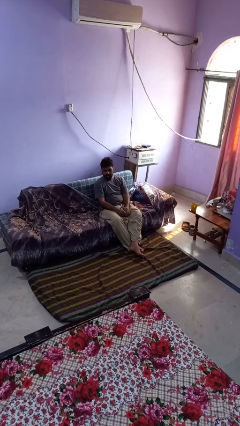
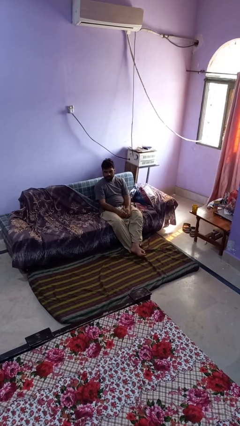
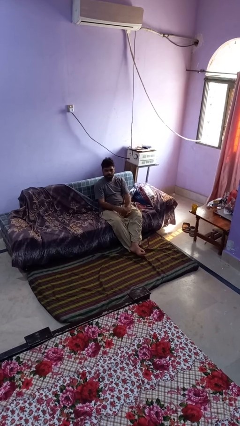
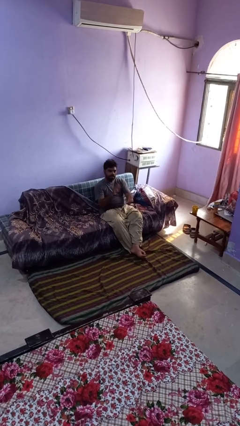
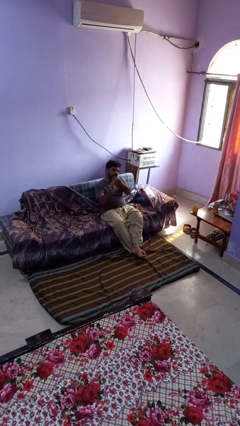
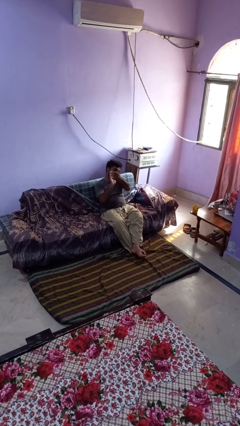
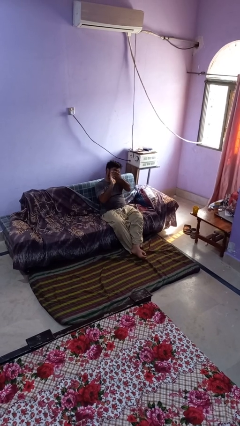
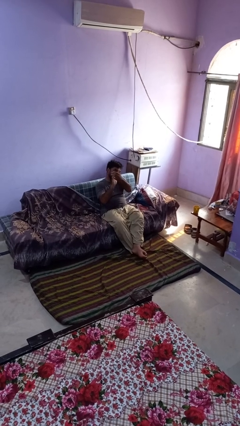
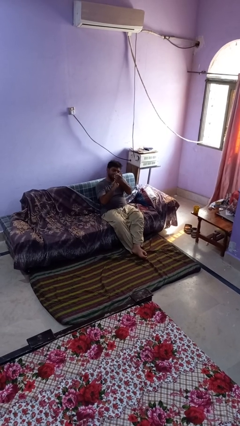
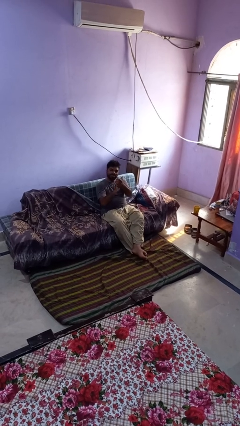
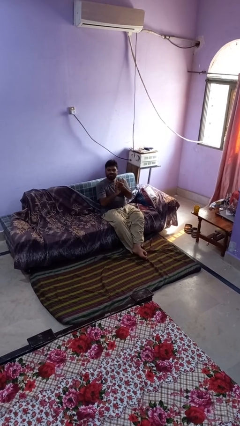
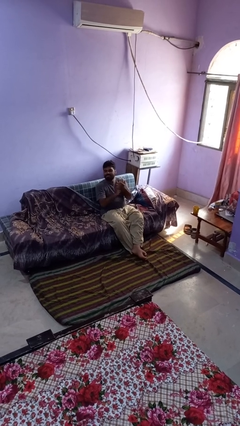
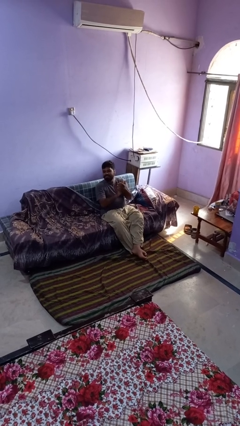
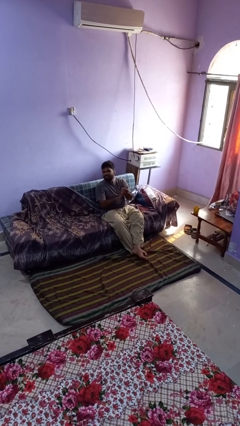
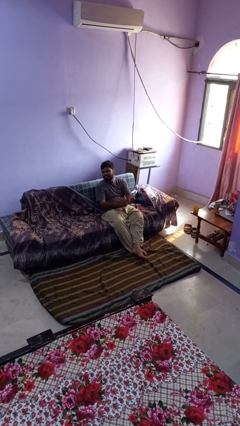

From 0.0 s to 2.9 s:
person claps hands

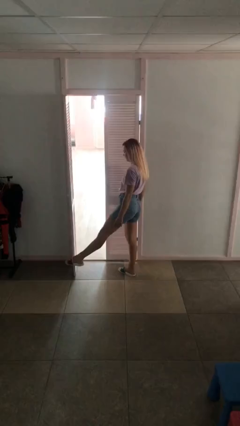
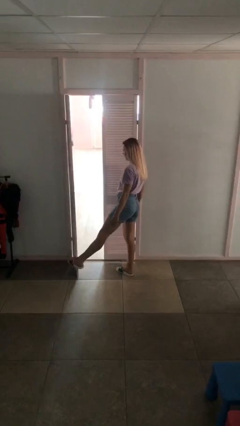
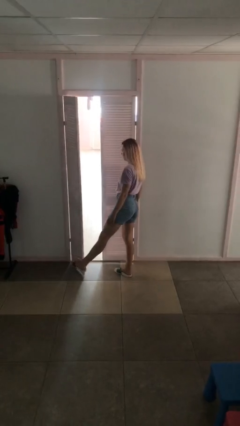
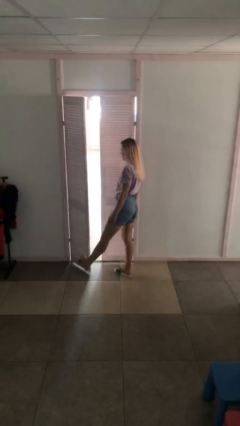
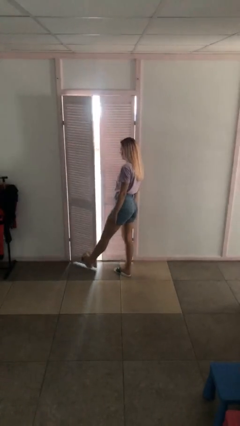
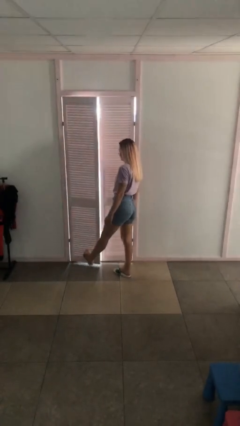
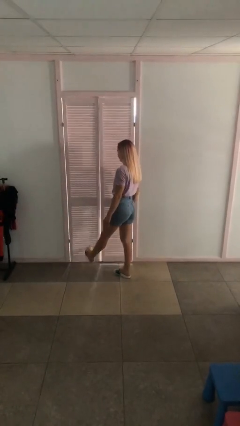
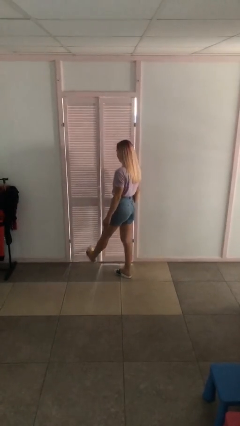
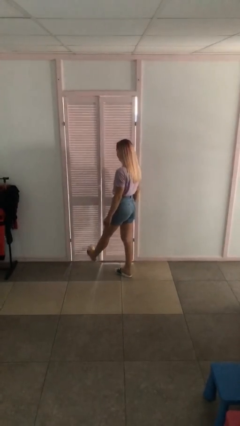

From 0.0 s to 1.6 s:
person closes door with foot

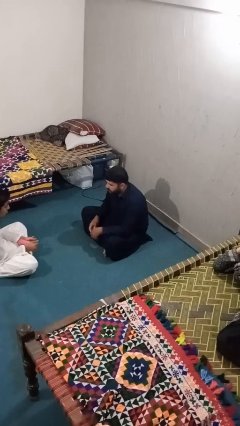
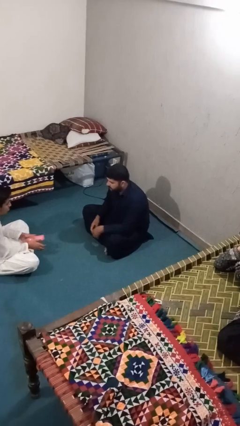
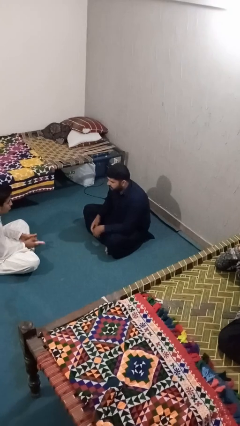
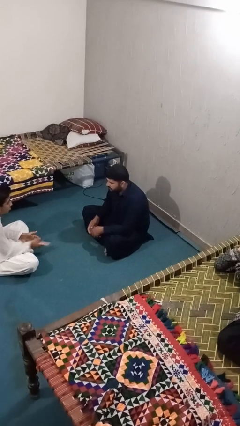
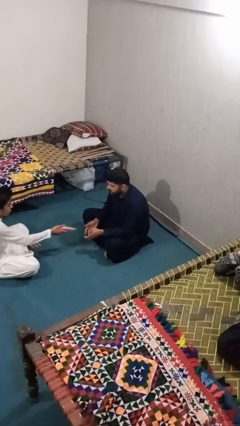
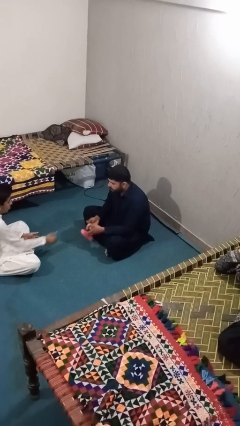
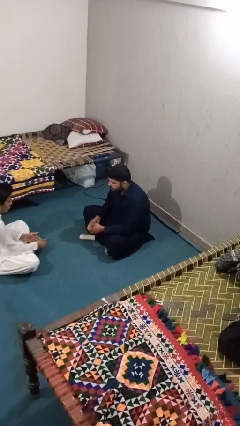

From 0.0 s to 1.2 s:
person catches object from person

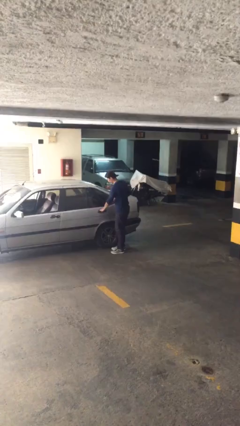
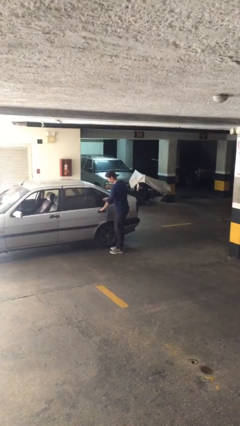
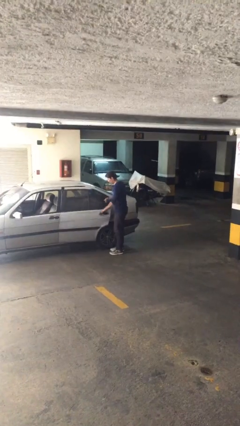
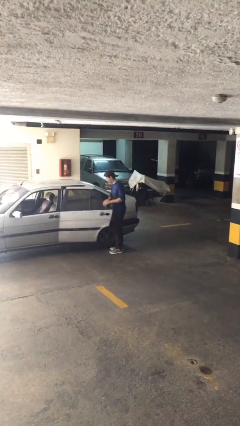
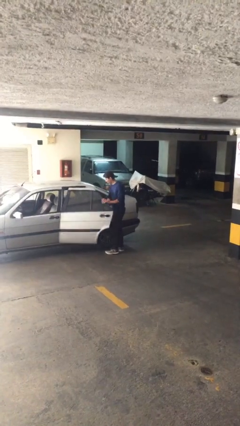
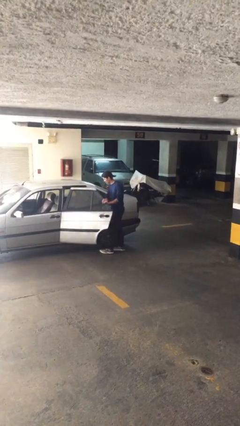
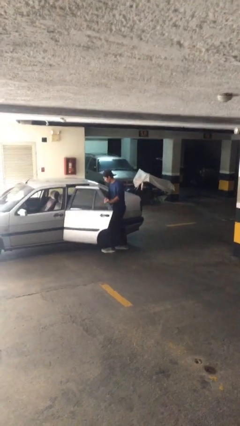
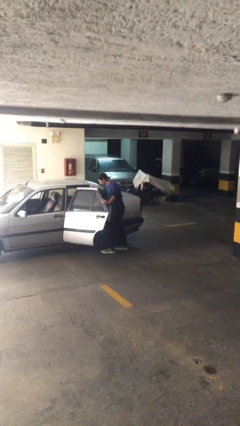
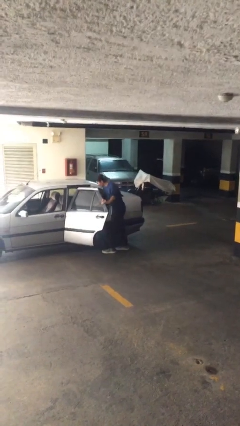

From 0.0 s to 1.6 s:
person opens car door

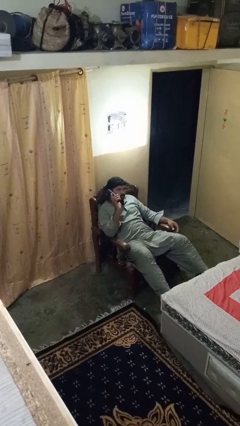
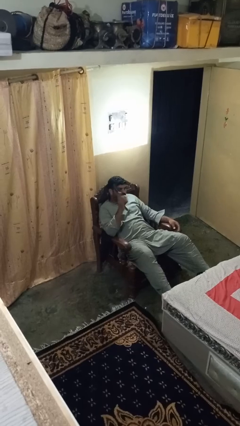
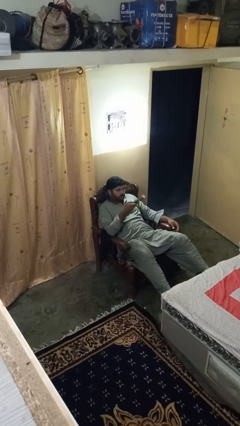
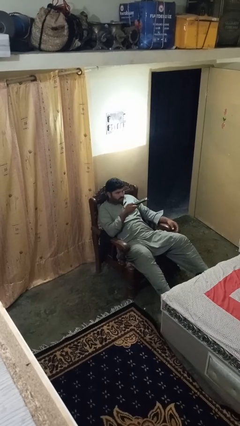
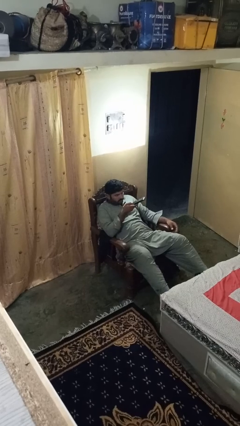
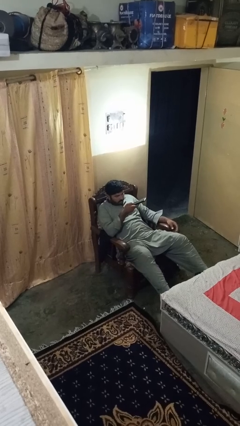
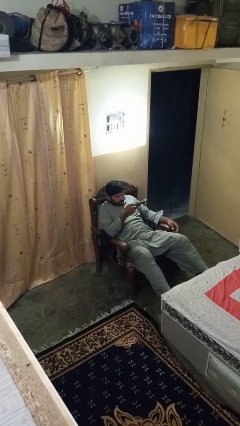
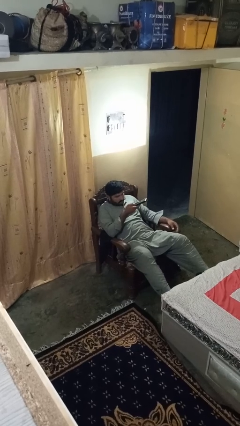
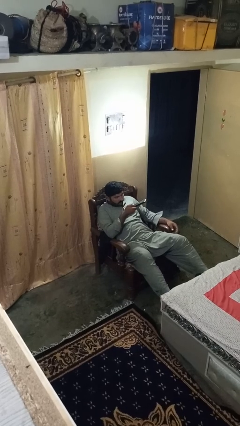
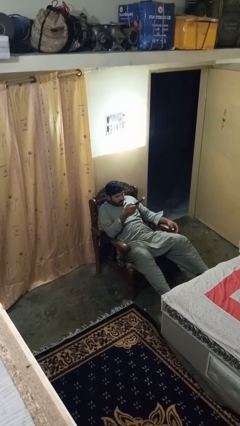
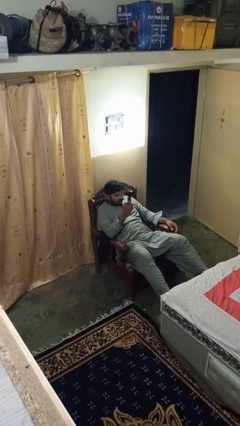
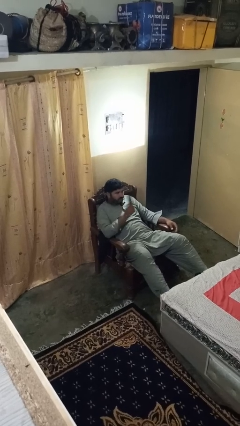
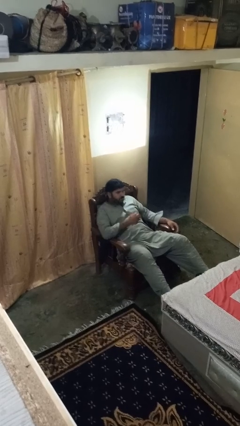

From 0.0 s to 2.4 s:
person uses television remote

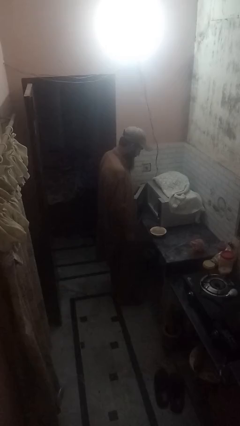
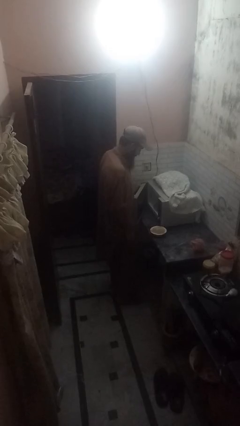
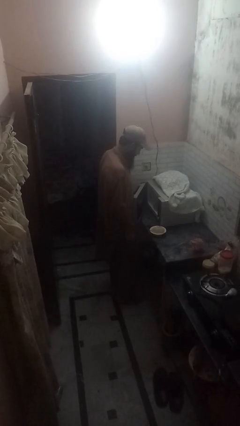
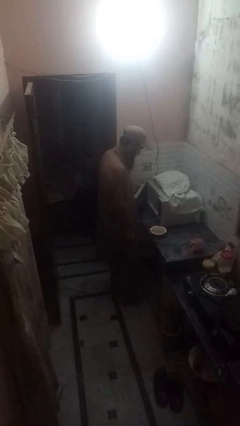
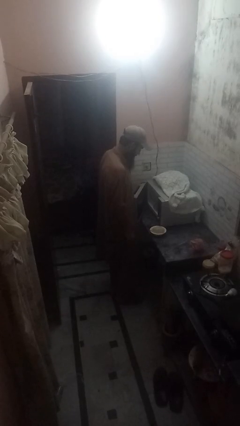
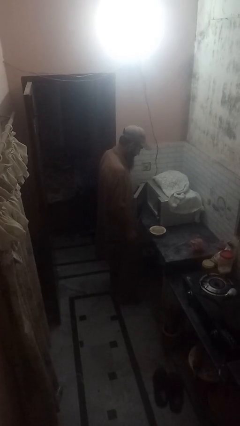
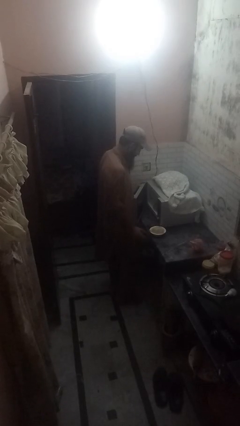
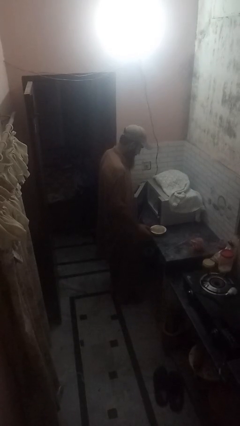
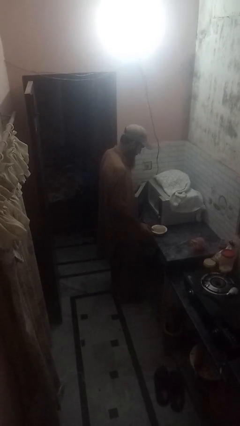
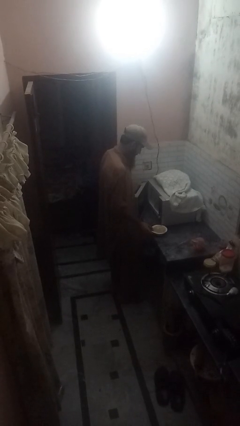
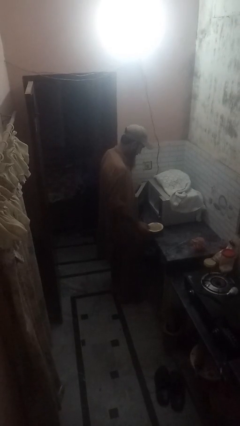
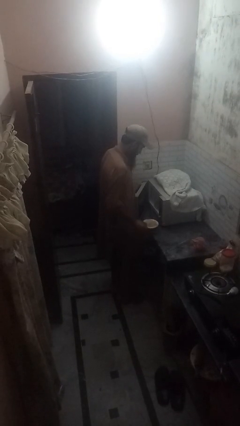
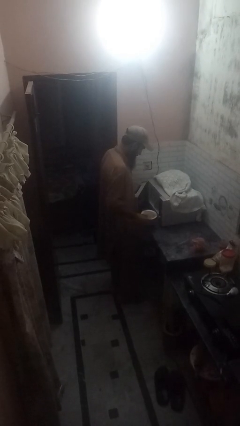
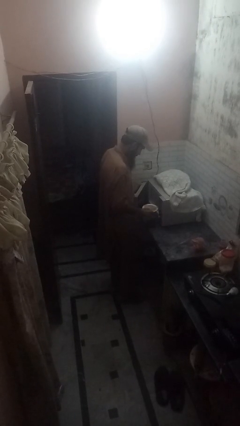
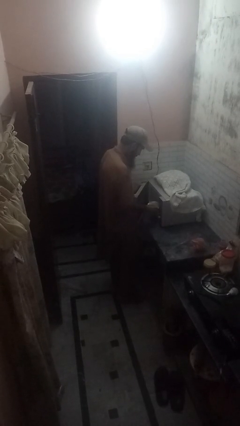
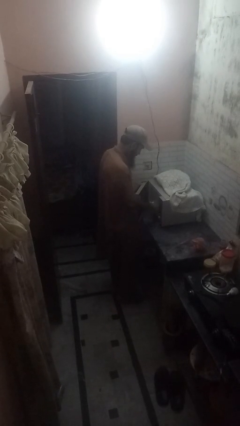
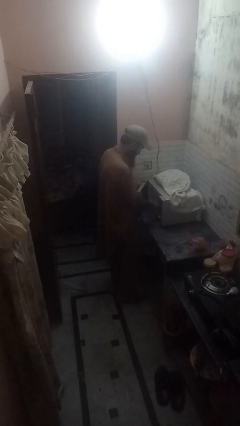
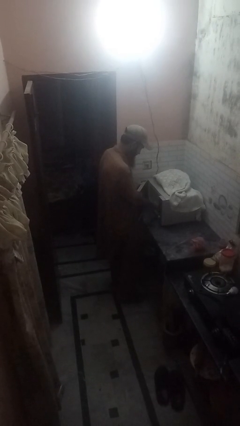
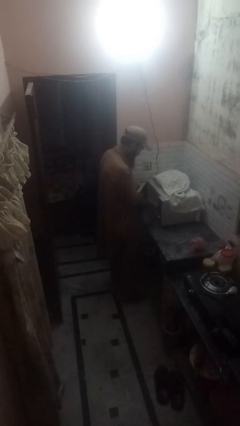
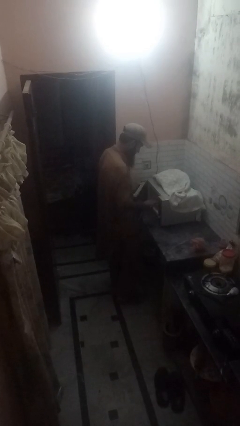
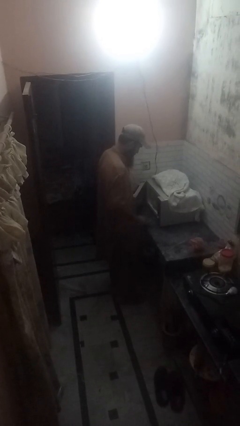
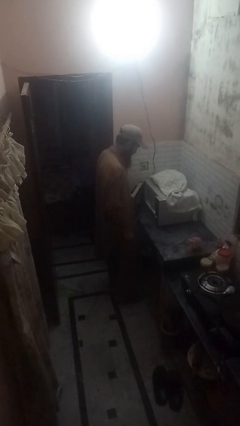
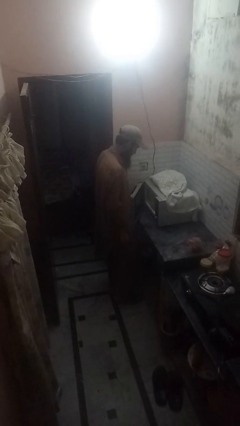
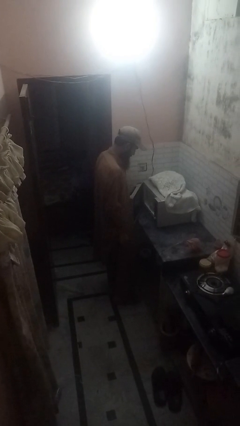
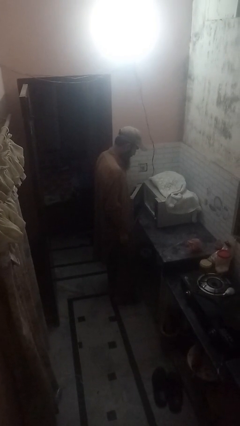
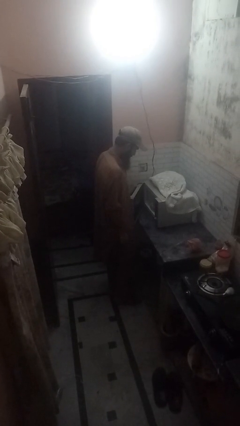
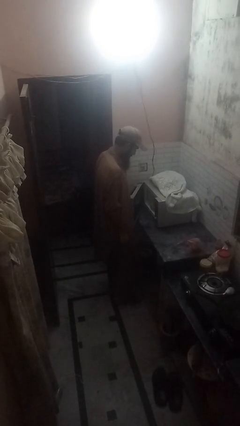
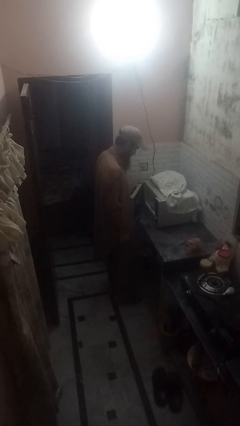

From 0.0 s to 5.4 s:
person puts object into microwave

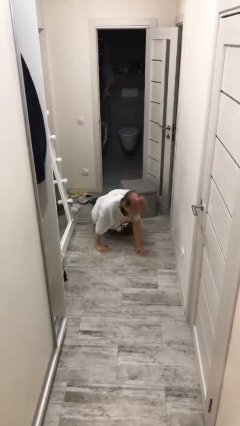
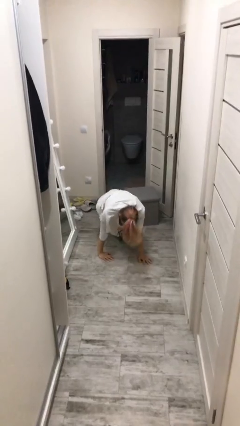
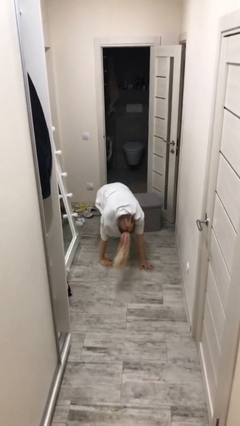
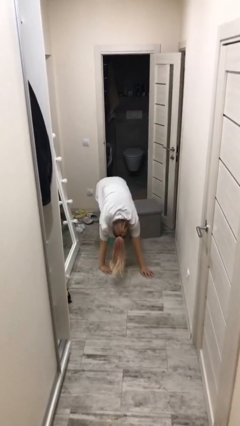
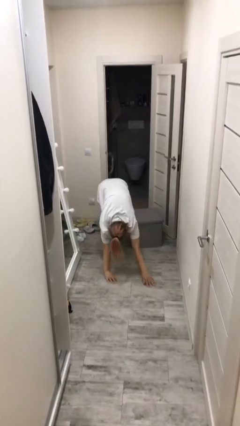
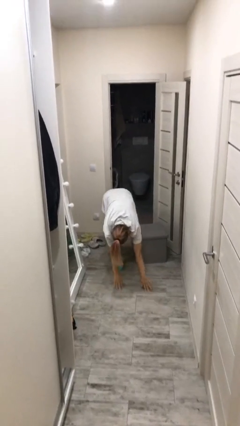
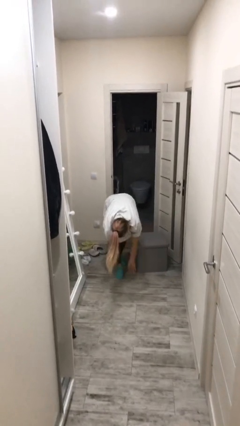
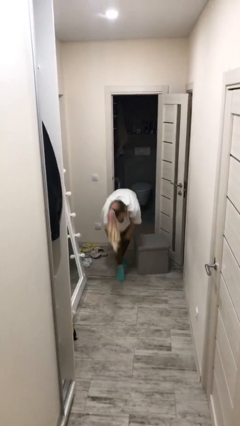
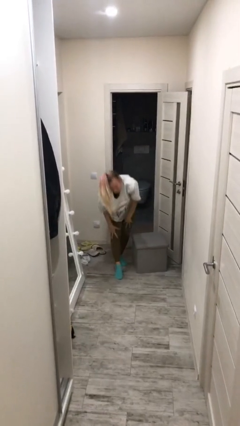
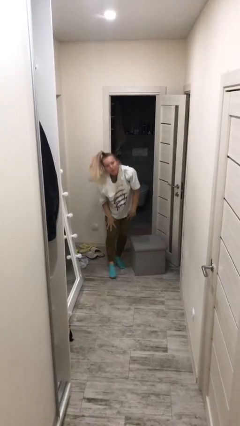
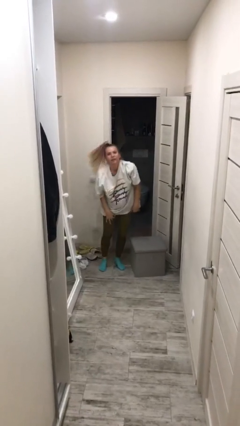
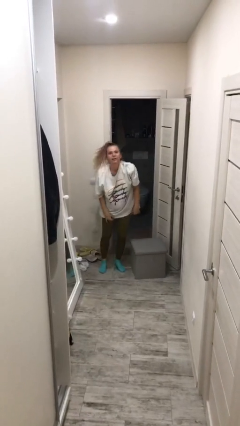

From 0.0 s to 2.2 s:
person stands up from floor
